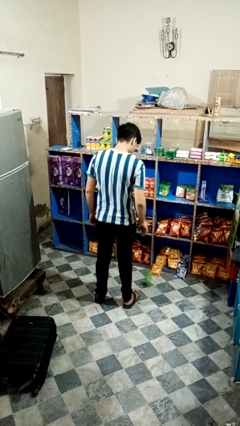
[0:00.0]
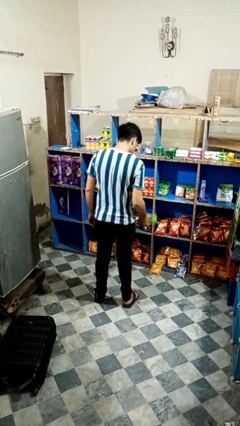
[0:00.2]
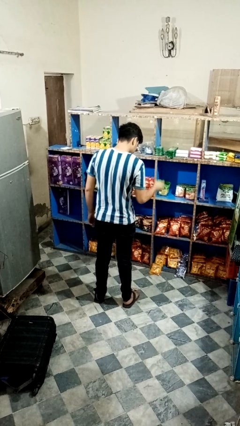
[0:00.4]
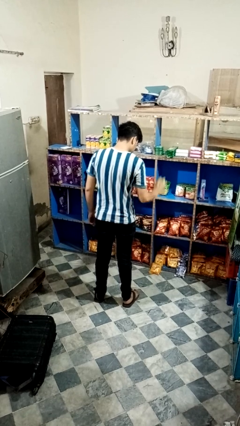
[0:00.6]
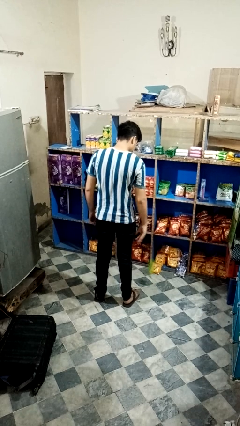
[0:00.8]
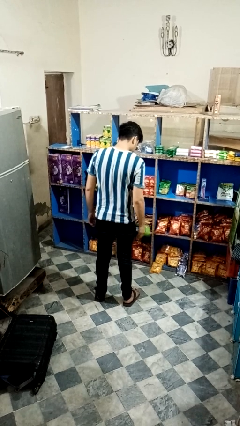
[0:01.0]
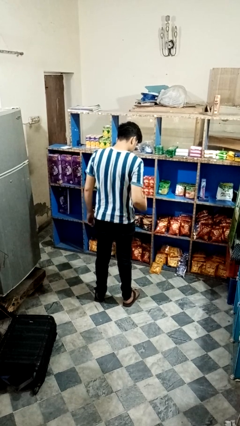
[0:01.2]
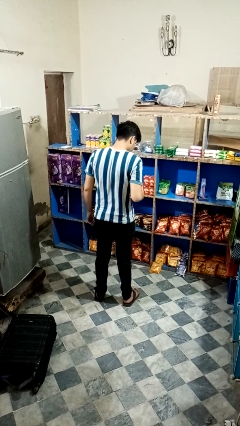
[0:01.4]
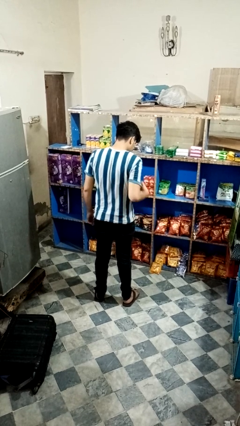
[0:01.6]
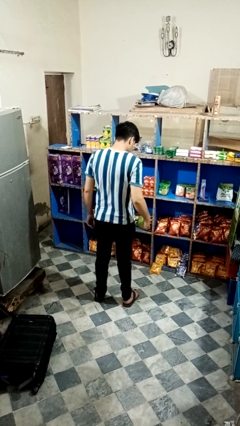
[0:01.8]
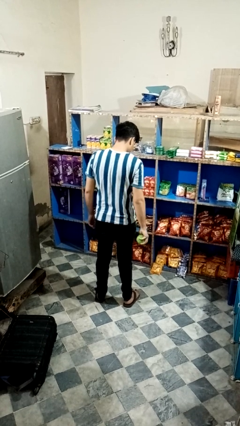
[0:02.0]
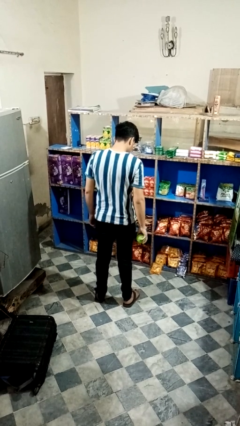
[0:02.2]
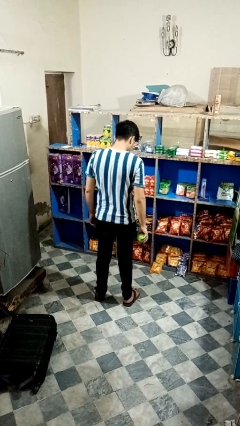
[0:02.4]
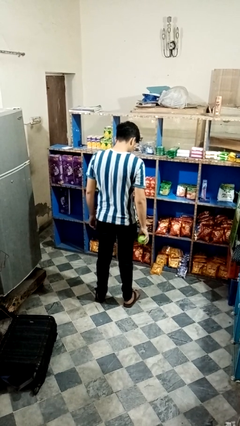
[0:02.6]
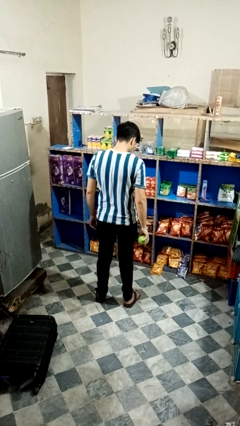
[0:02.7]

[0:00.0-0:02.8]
person bounces ball on floor

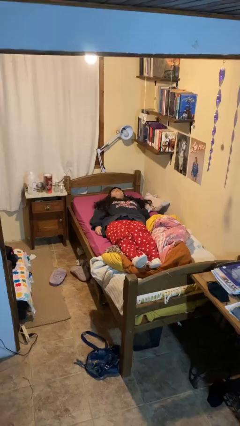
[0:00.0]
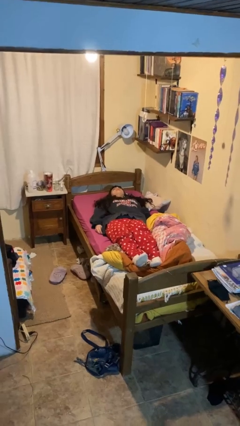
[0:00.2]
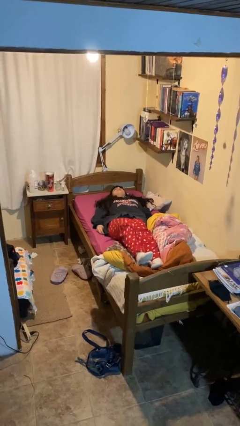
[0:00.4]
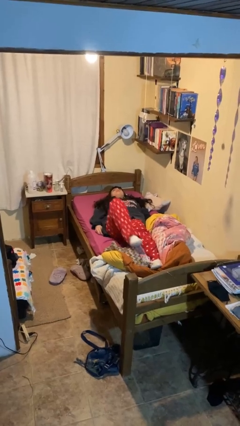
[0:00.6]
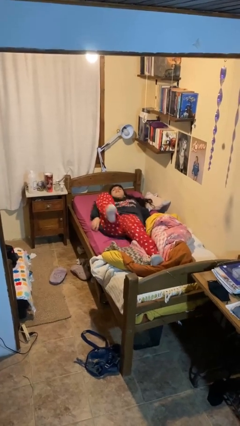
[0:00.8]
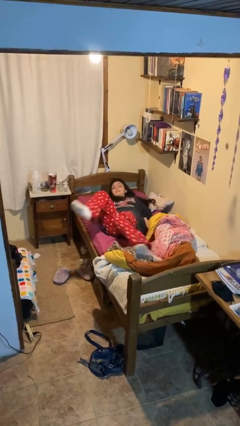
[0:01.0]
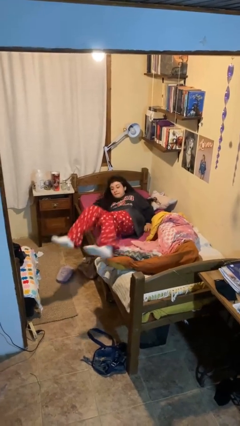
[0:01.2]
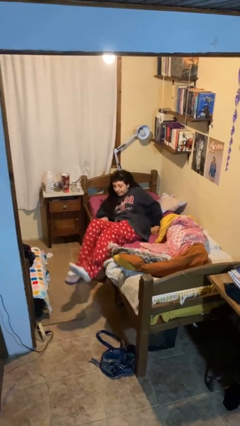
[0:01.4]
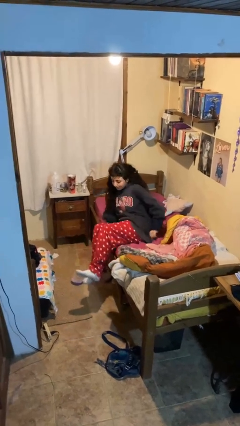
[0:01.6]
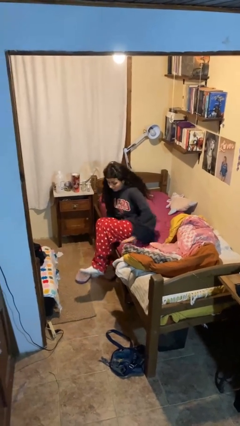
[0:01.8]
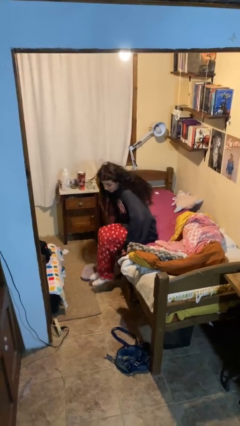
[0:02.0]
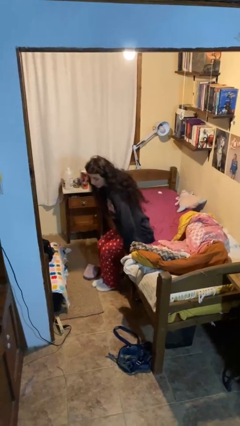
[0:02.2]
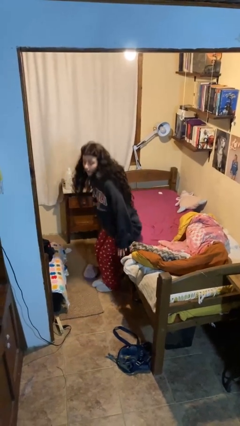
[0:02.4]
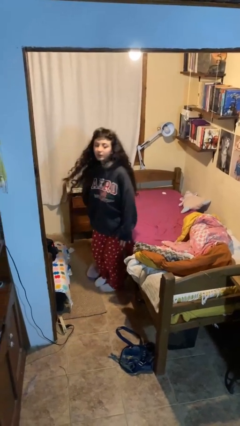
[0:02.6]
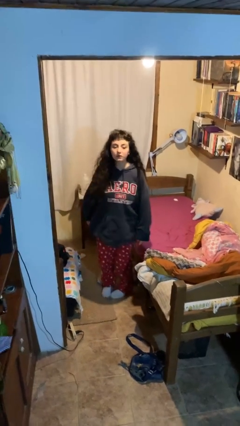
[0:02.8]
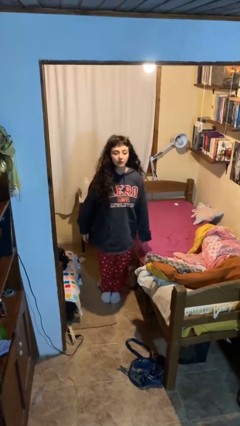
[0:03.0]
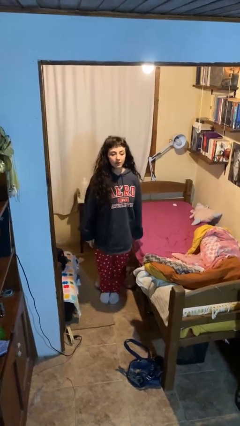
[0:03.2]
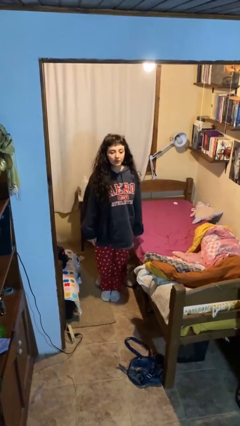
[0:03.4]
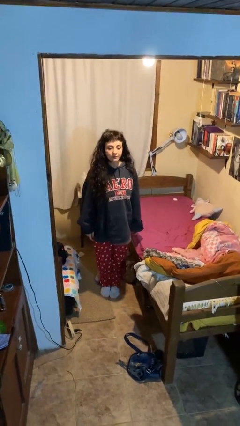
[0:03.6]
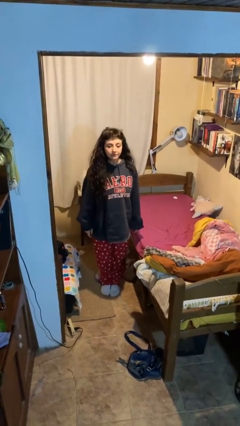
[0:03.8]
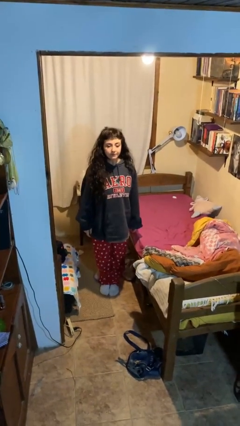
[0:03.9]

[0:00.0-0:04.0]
person stands up

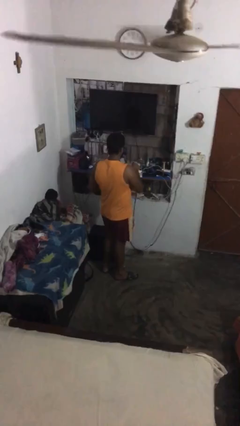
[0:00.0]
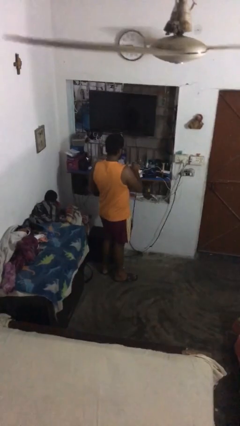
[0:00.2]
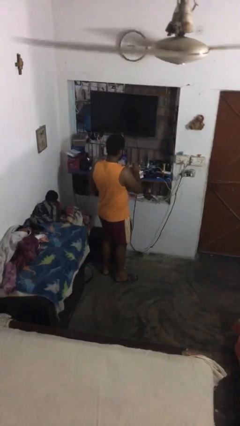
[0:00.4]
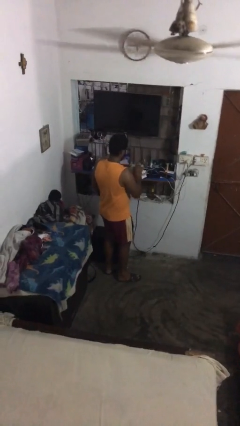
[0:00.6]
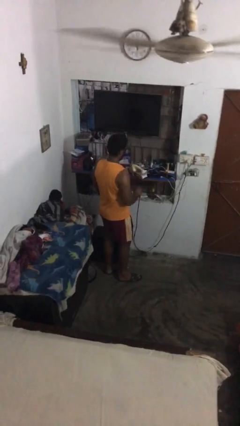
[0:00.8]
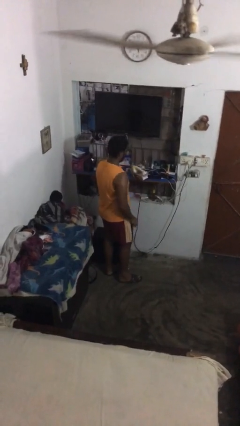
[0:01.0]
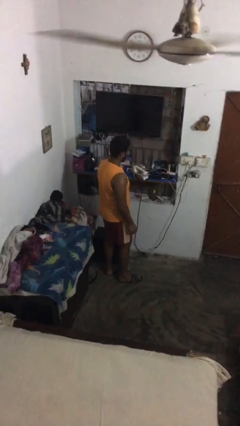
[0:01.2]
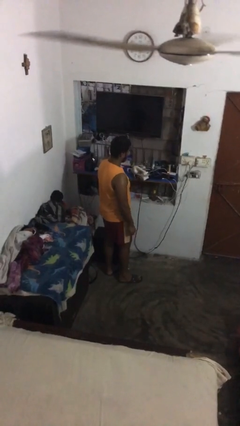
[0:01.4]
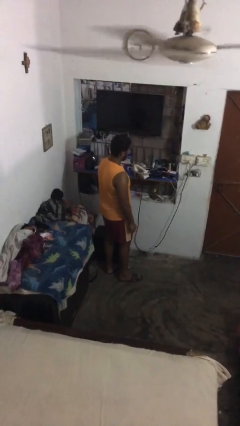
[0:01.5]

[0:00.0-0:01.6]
person puts down object on shelf

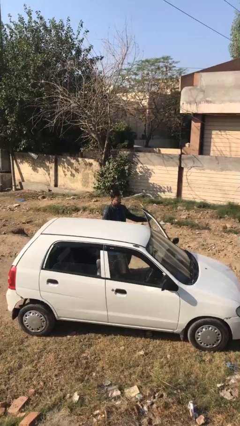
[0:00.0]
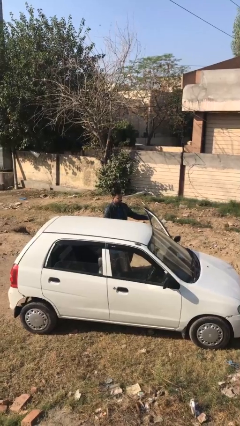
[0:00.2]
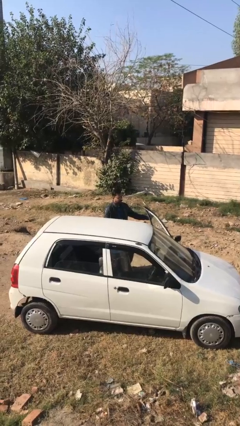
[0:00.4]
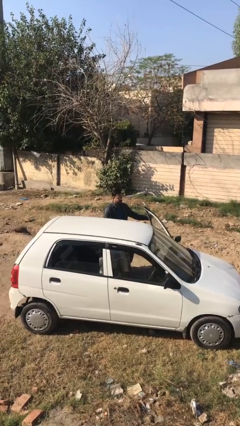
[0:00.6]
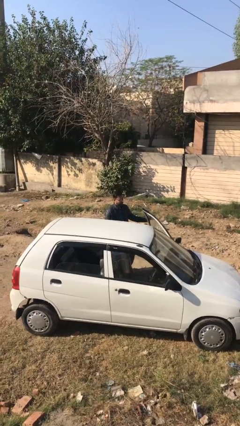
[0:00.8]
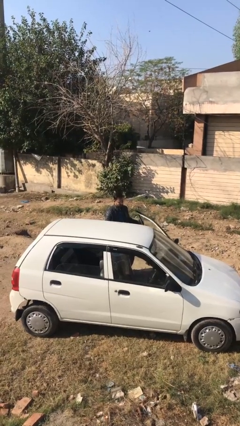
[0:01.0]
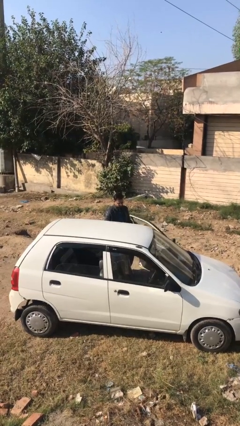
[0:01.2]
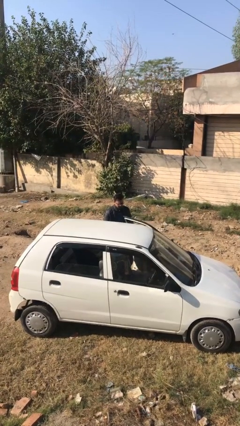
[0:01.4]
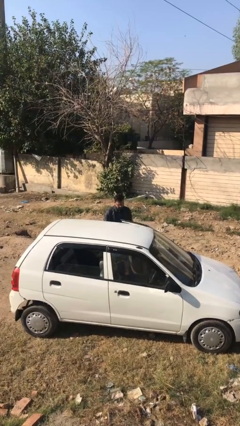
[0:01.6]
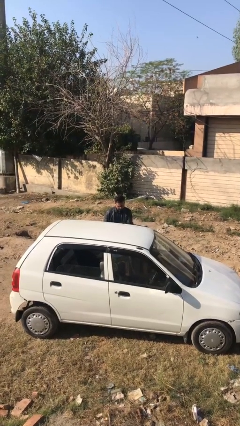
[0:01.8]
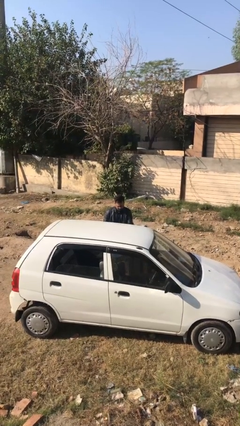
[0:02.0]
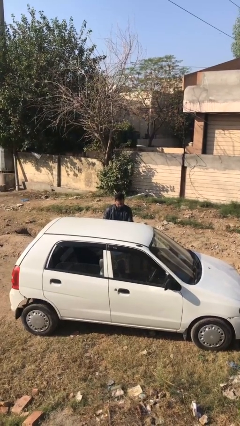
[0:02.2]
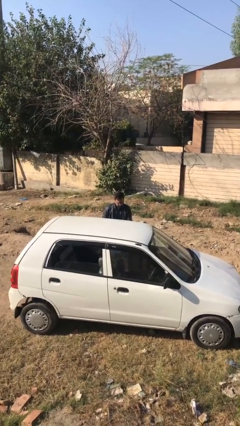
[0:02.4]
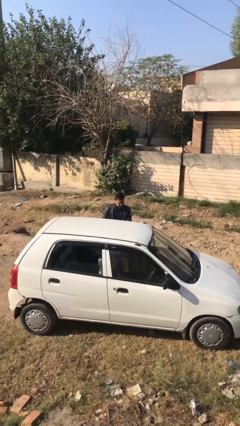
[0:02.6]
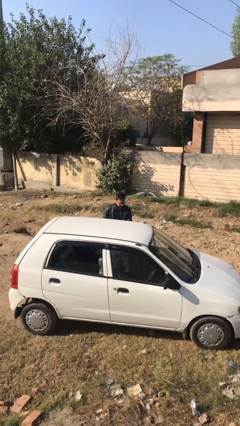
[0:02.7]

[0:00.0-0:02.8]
person closes car door

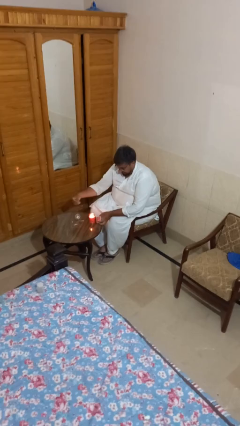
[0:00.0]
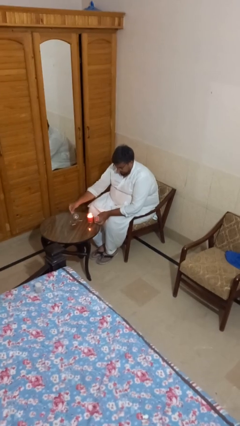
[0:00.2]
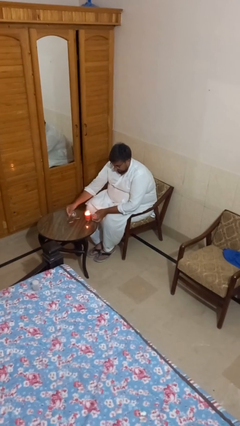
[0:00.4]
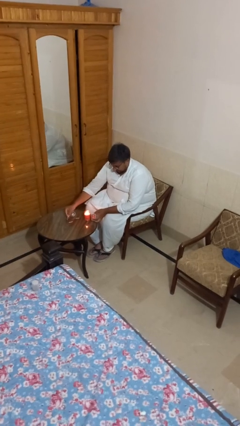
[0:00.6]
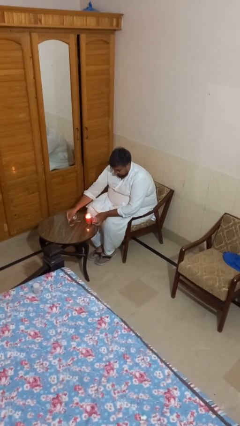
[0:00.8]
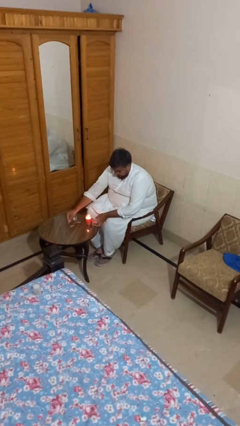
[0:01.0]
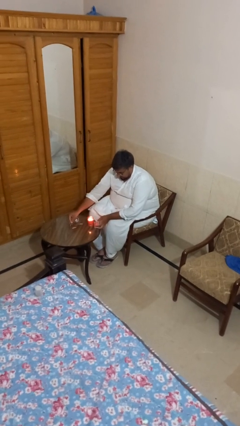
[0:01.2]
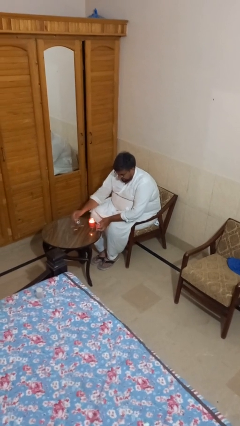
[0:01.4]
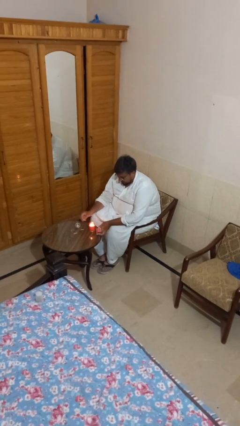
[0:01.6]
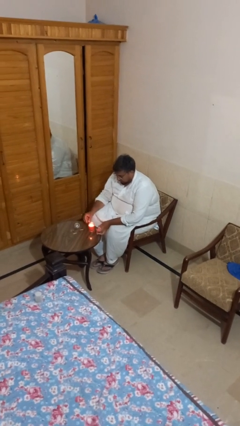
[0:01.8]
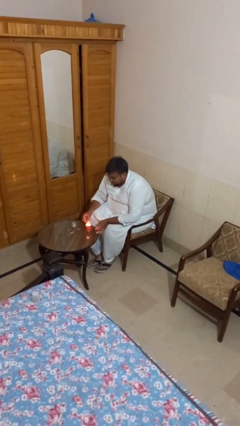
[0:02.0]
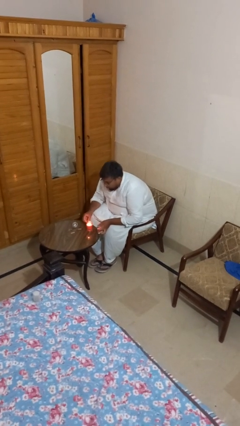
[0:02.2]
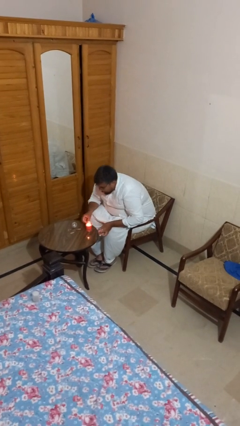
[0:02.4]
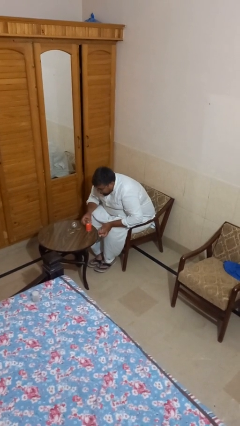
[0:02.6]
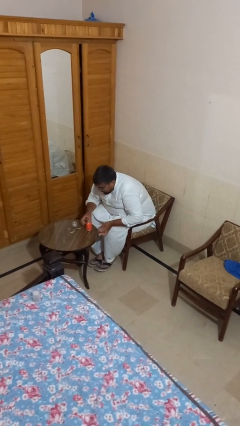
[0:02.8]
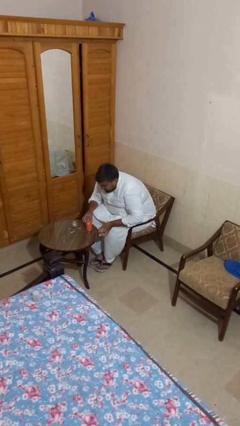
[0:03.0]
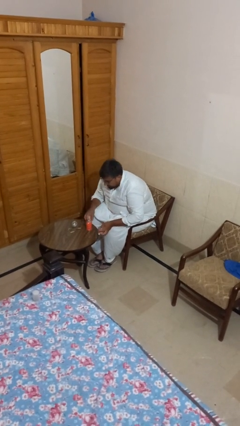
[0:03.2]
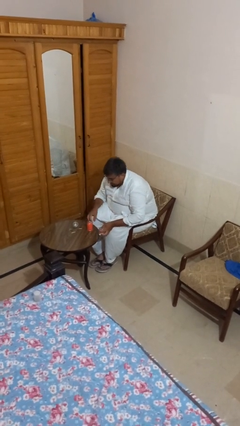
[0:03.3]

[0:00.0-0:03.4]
person extinguishes candle

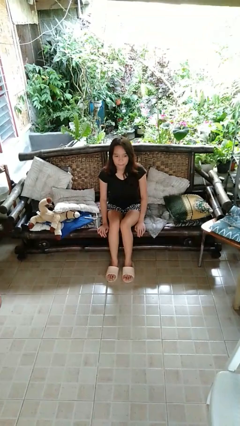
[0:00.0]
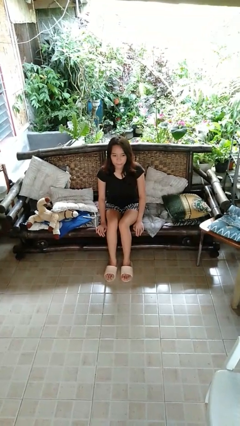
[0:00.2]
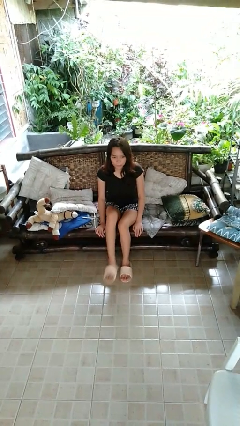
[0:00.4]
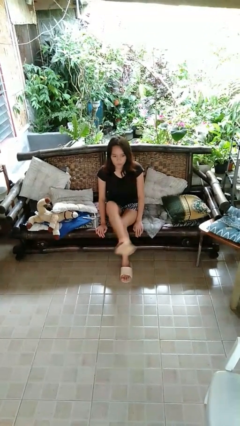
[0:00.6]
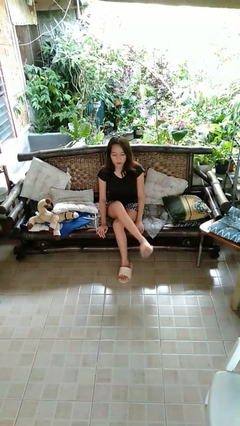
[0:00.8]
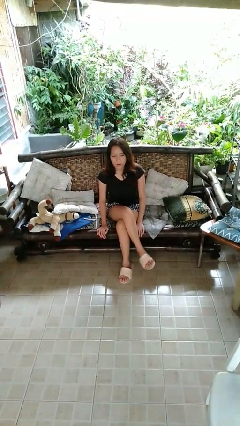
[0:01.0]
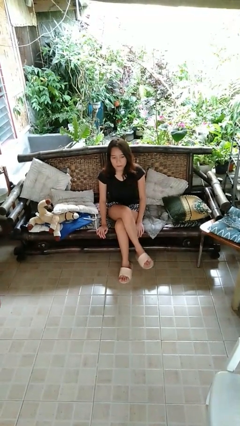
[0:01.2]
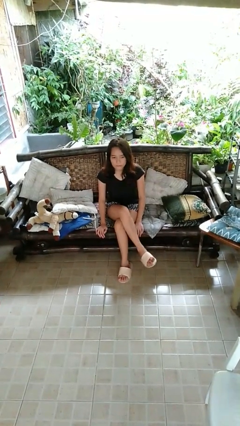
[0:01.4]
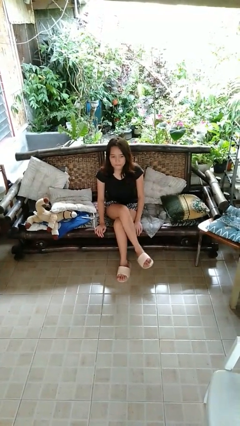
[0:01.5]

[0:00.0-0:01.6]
person crosses legs

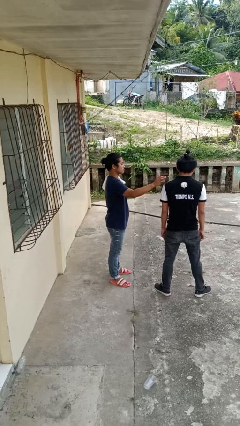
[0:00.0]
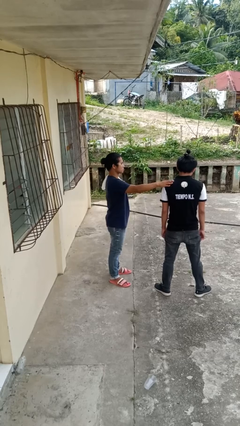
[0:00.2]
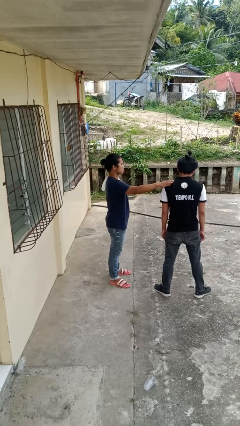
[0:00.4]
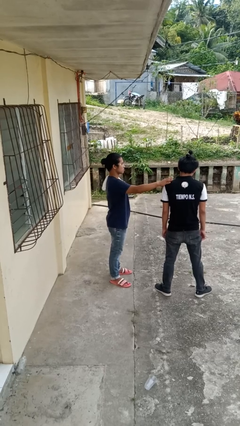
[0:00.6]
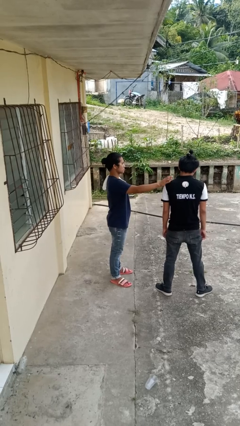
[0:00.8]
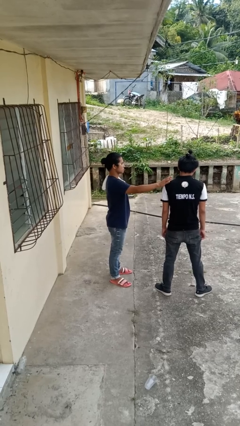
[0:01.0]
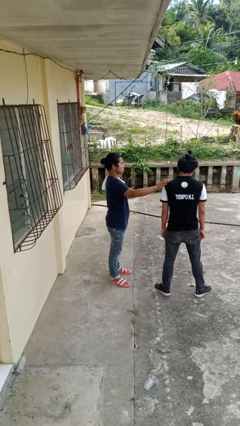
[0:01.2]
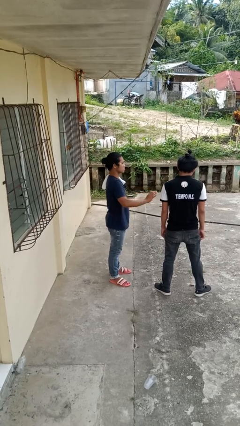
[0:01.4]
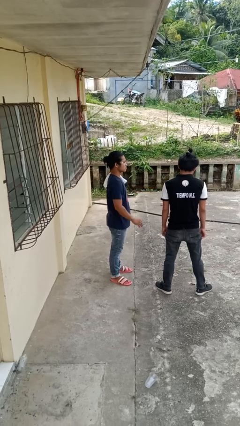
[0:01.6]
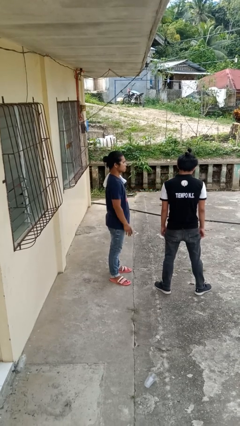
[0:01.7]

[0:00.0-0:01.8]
person pounds shoulders of person
